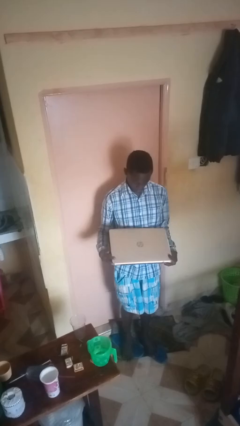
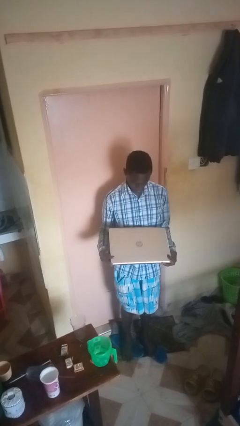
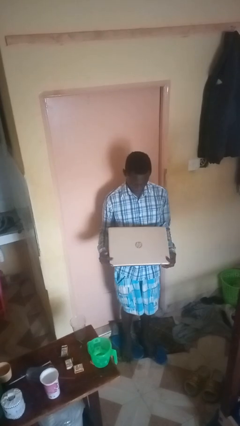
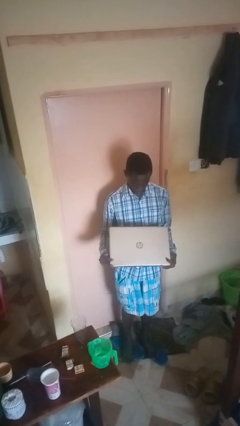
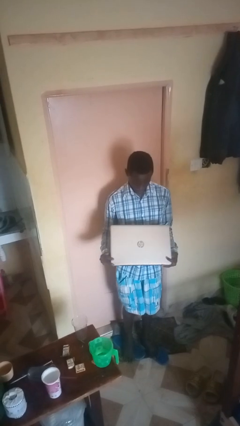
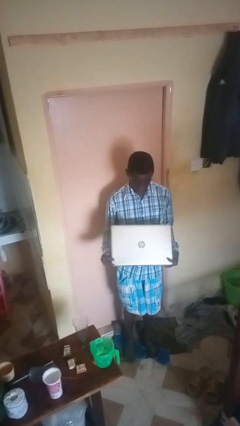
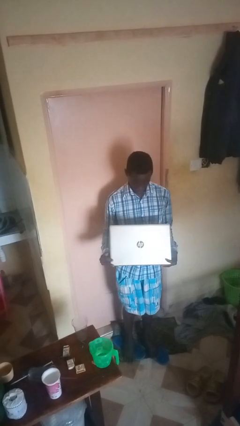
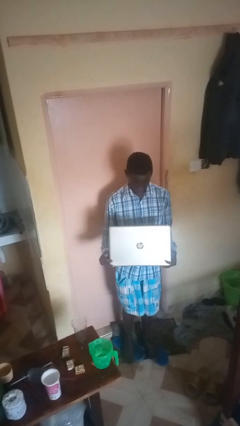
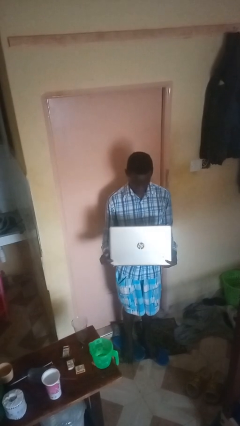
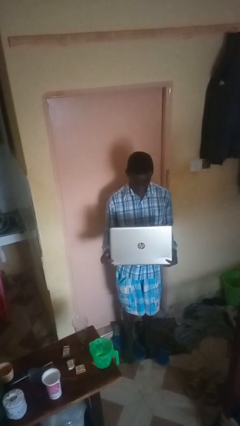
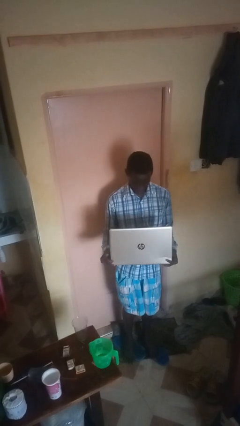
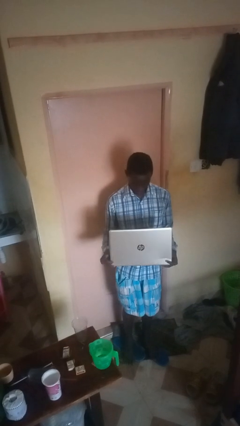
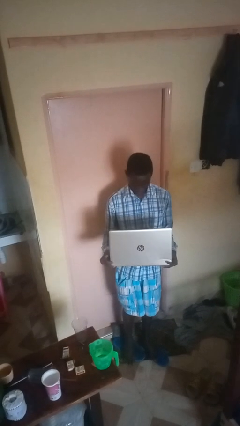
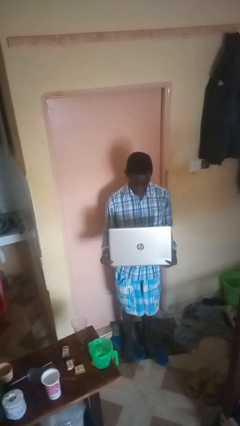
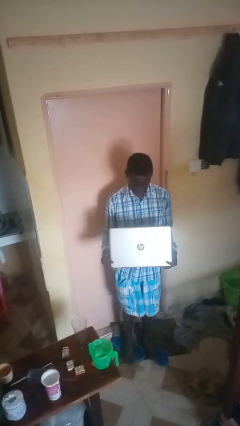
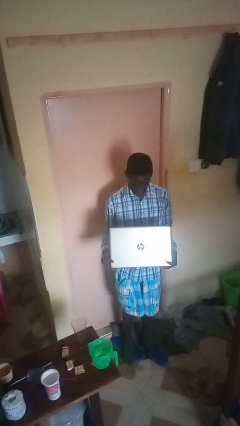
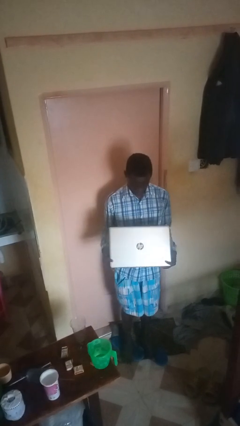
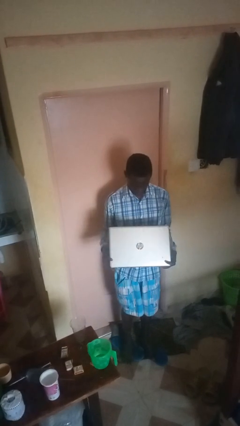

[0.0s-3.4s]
person opens laptop

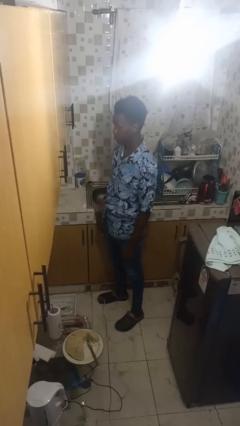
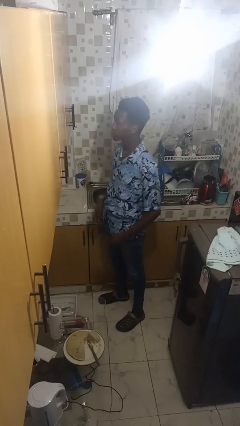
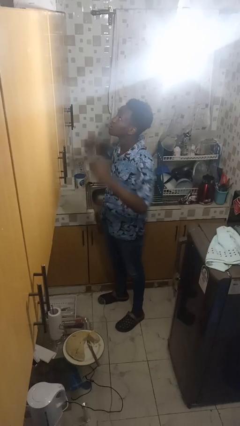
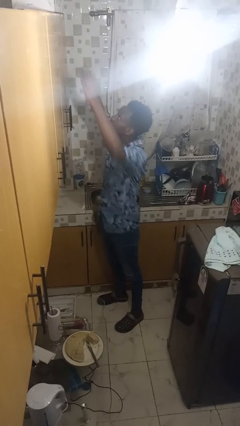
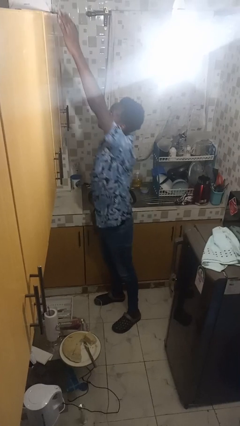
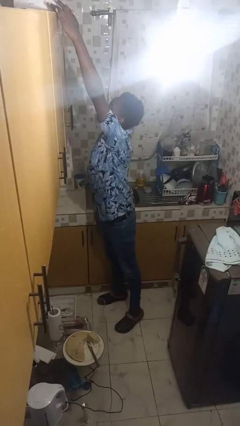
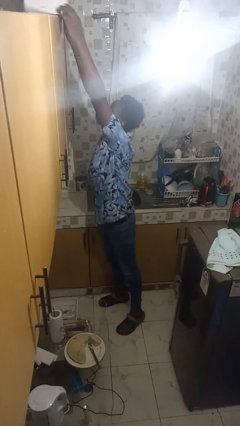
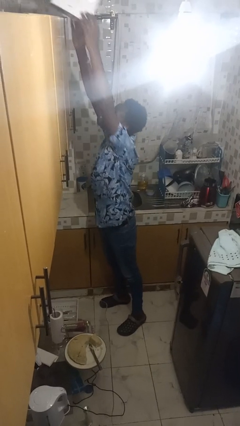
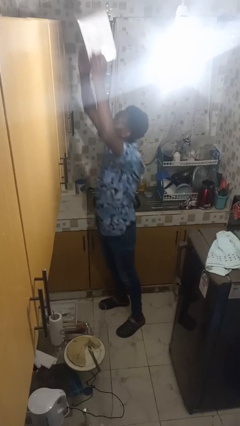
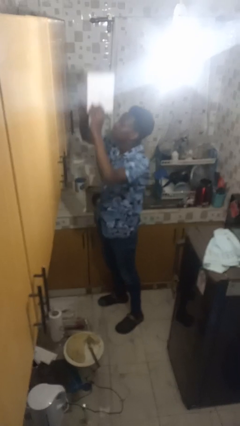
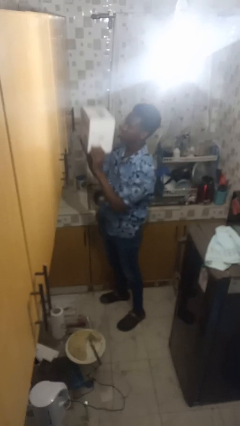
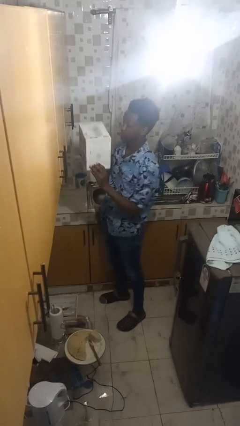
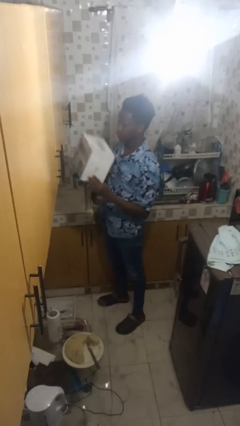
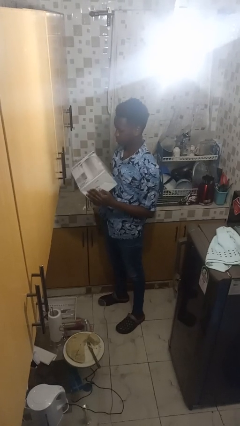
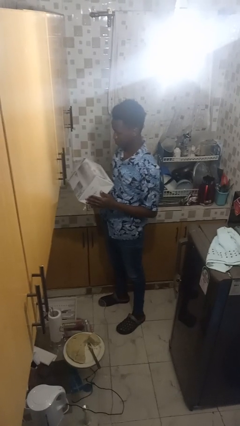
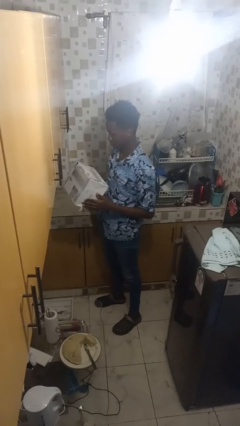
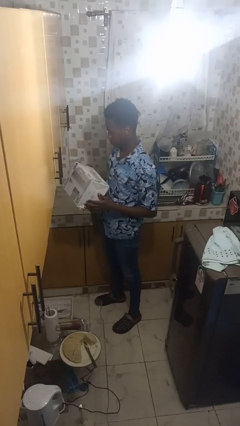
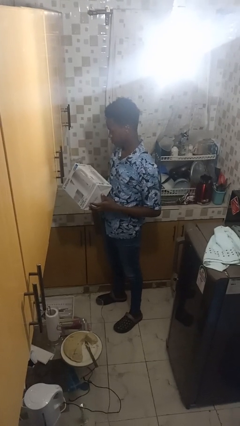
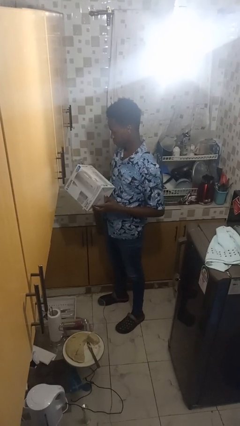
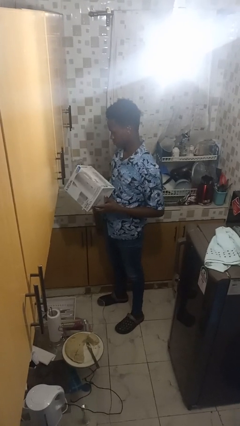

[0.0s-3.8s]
person picks up object from shelf

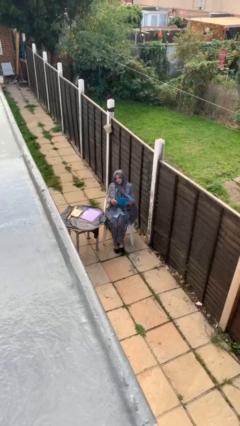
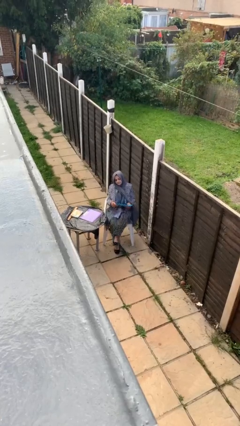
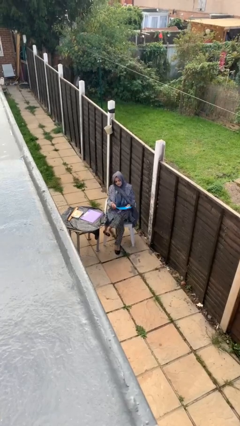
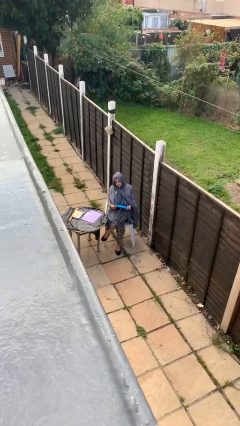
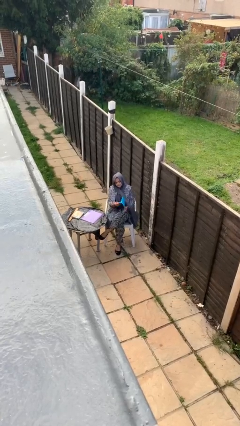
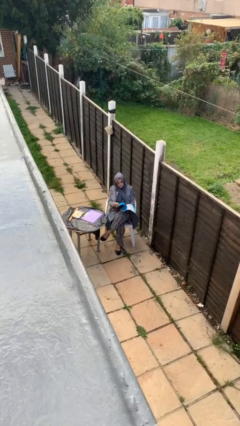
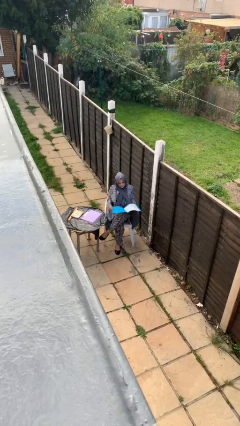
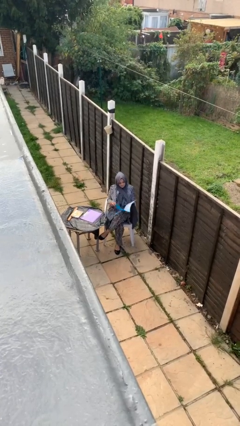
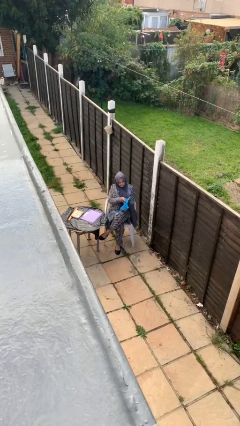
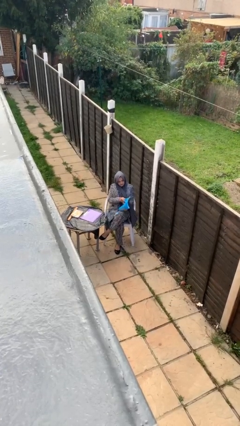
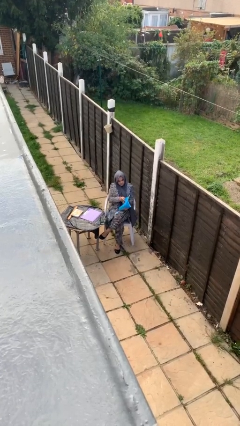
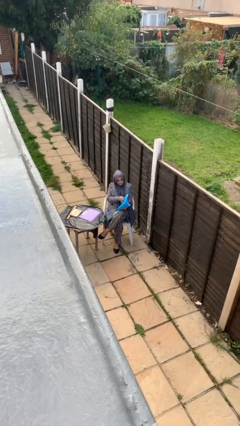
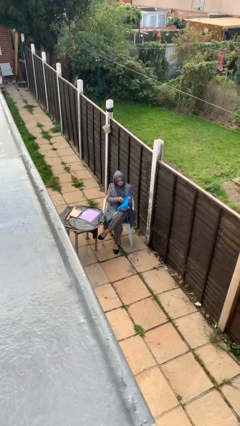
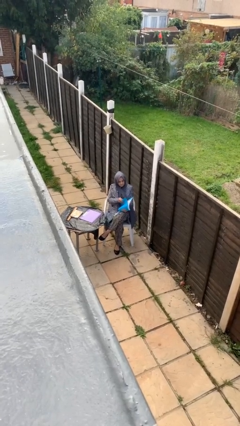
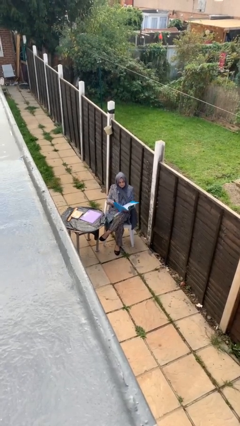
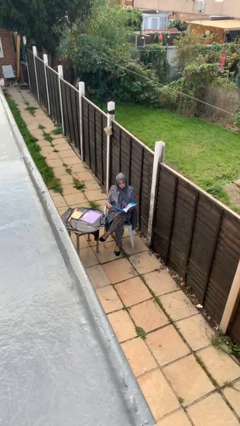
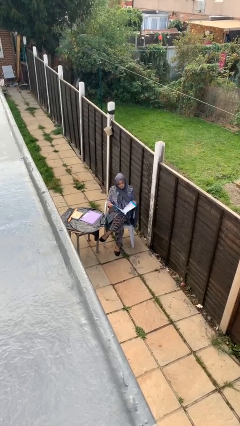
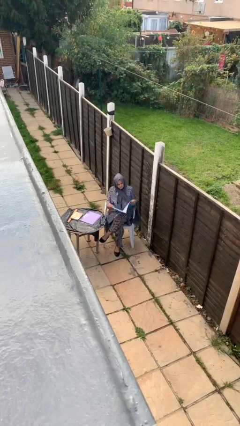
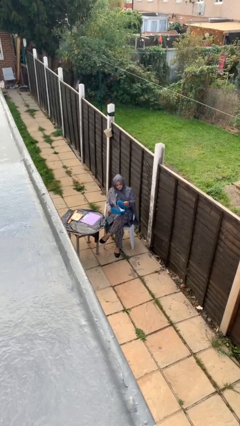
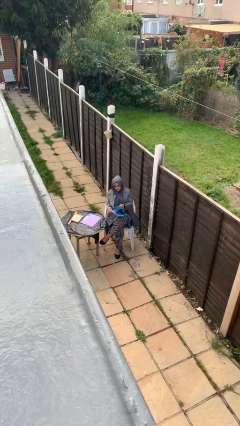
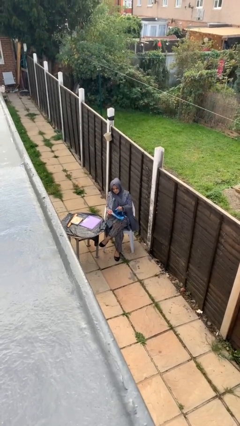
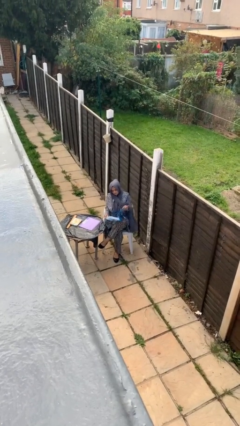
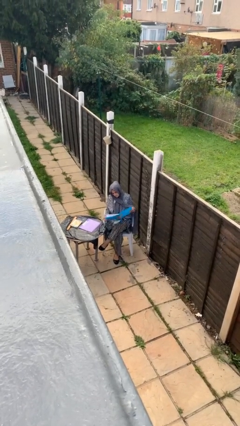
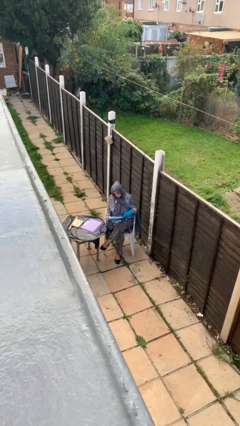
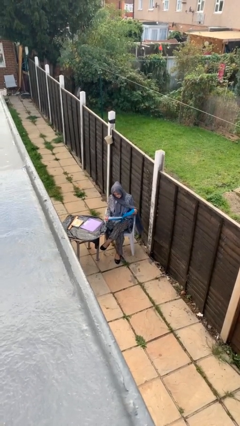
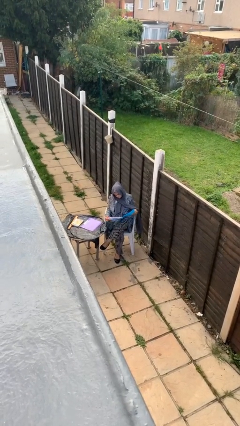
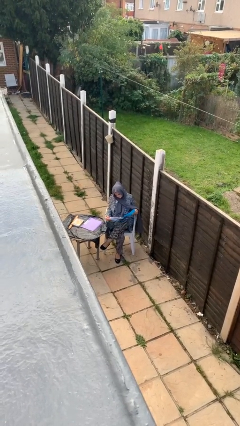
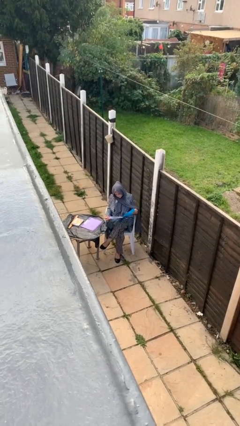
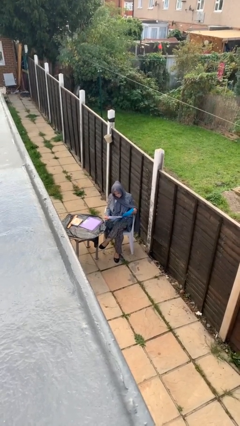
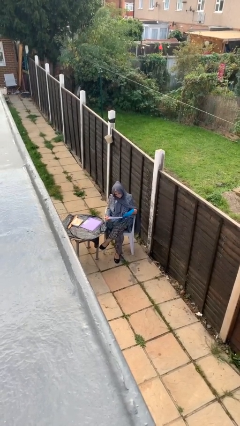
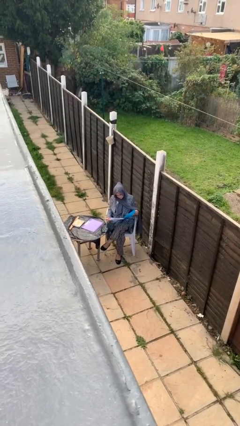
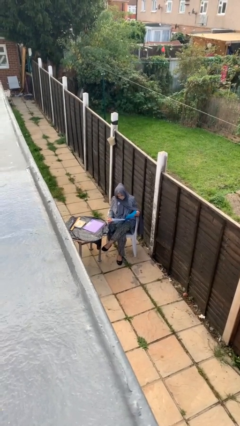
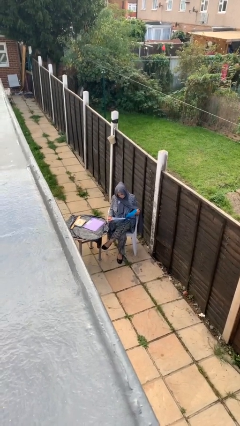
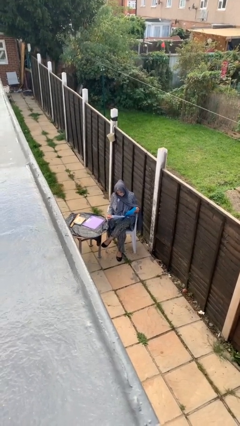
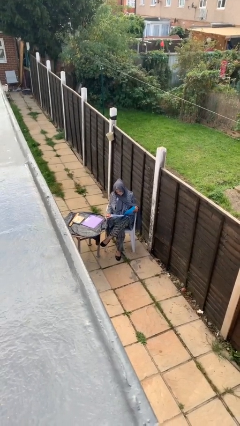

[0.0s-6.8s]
person reads document

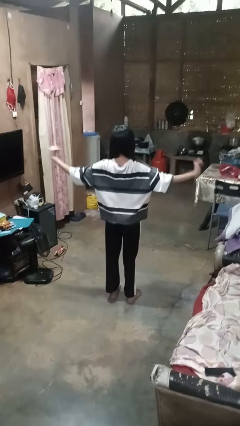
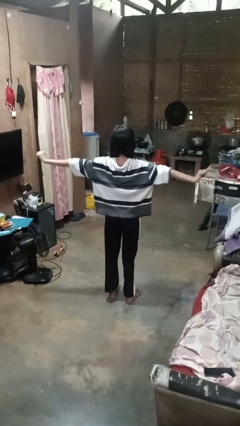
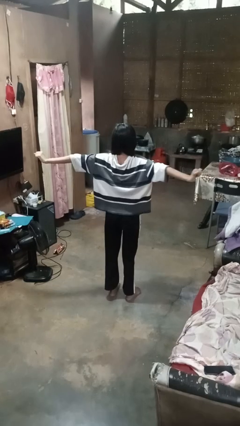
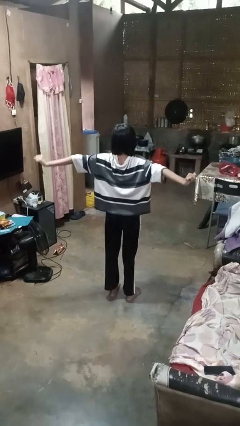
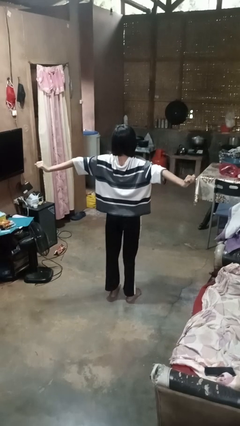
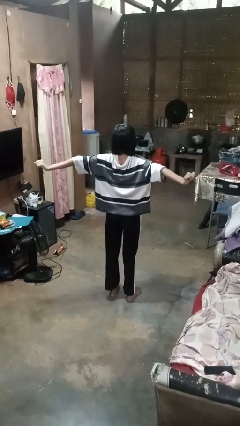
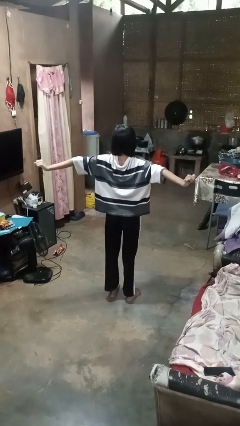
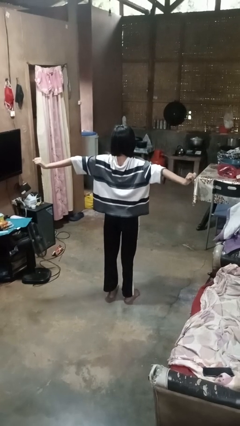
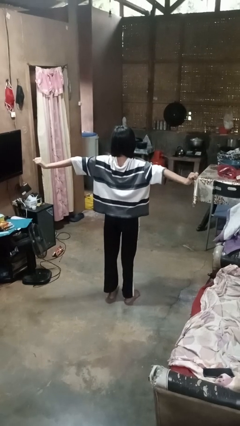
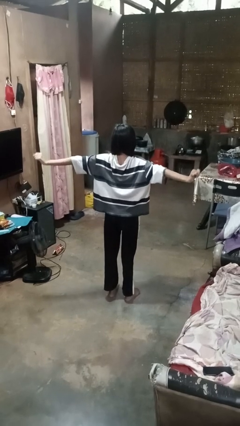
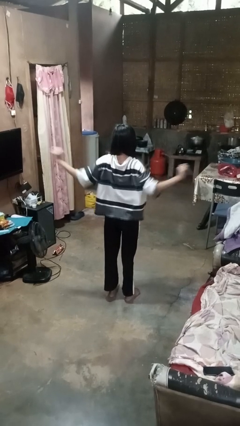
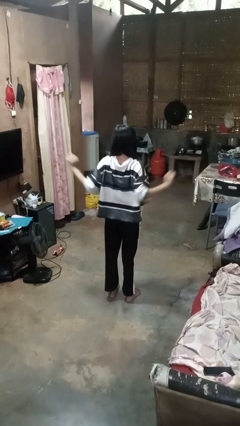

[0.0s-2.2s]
person stretches arms to side

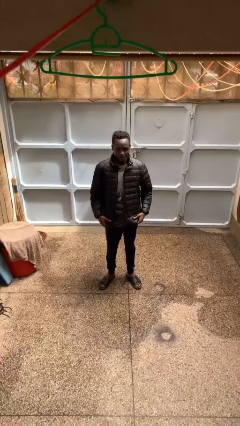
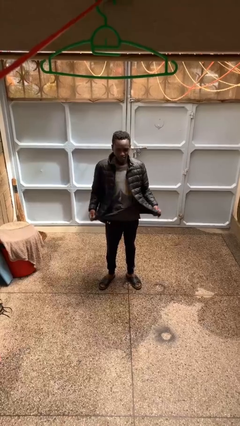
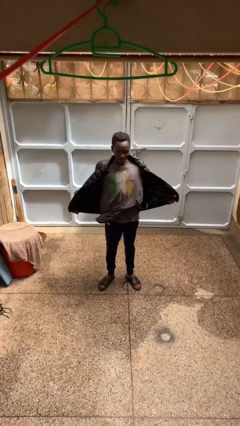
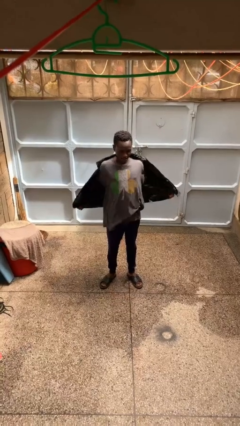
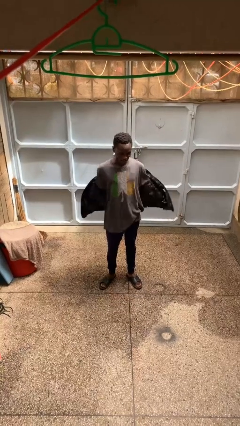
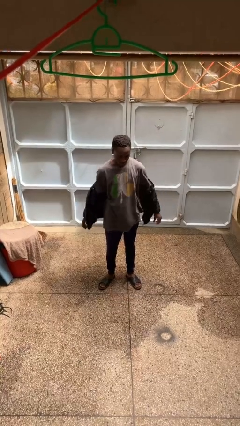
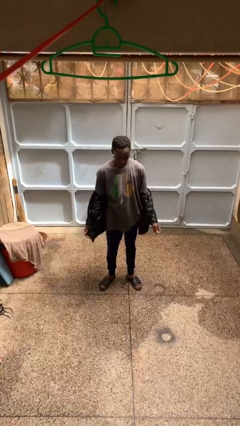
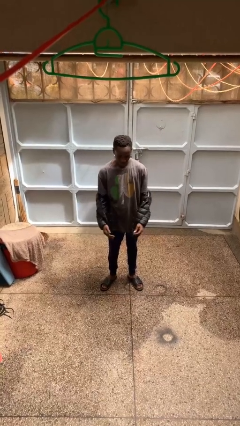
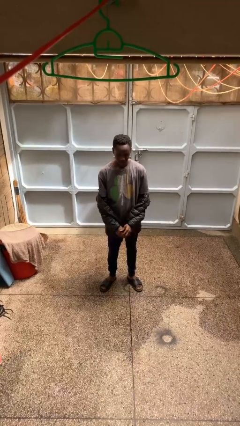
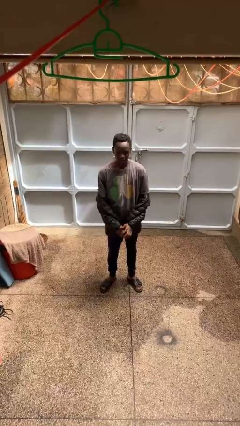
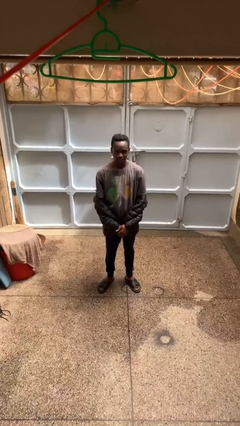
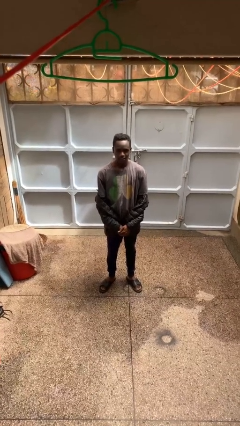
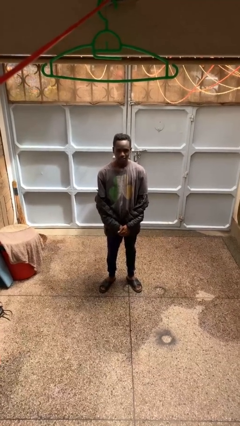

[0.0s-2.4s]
person takes off jacket
